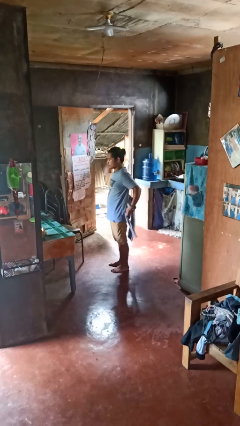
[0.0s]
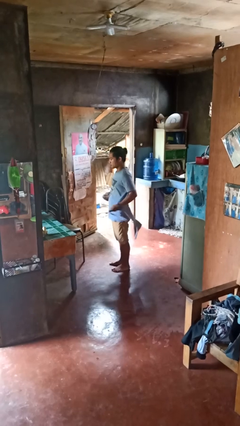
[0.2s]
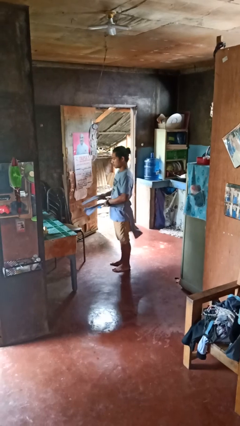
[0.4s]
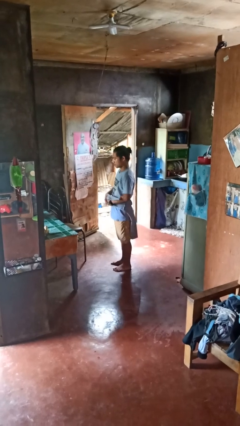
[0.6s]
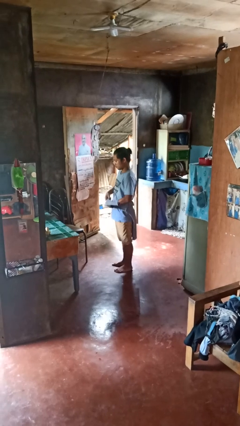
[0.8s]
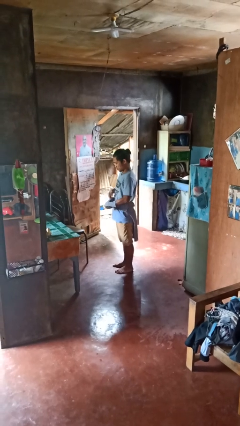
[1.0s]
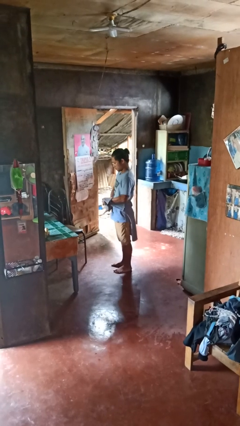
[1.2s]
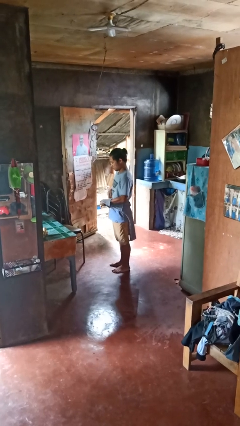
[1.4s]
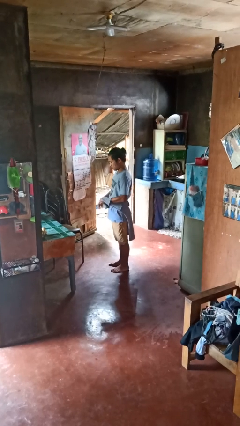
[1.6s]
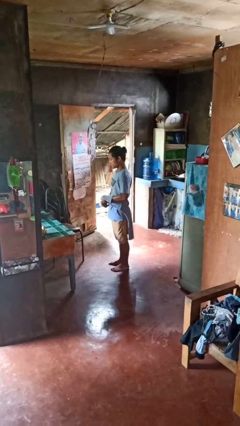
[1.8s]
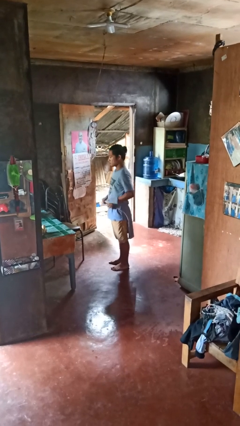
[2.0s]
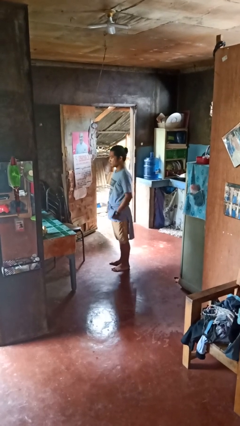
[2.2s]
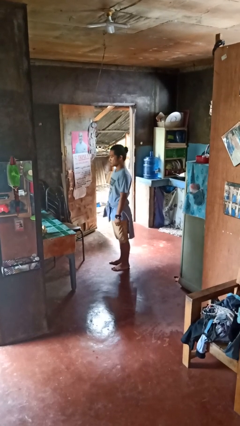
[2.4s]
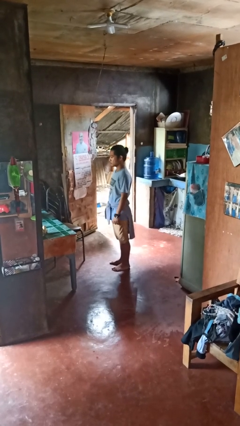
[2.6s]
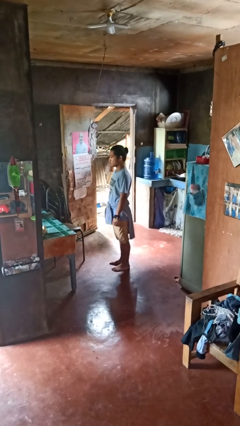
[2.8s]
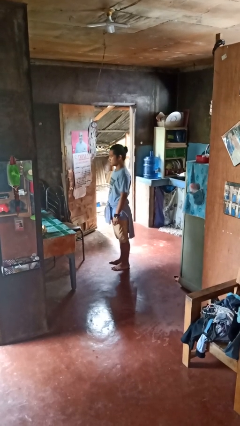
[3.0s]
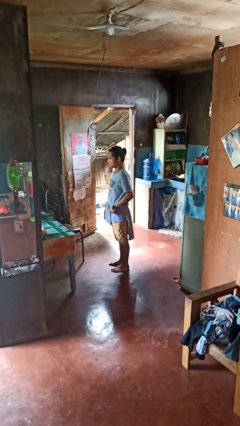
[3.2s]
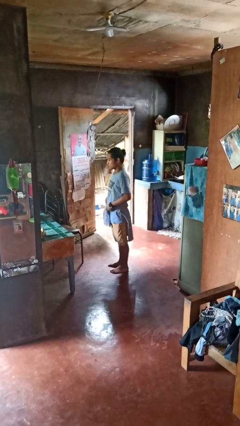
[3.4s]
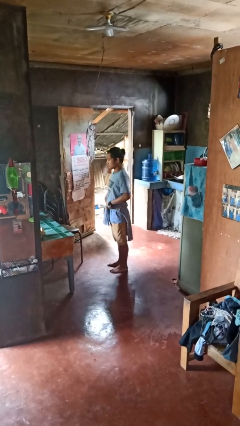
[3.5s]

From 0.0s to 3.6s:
person ties jacket around waist

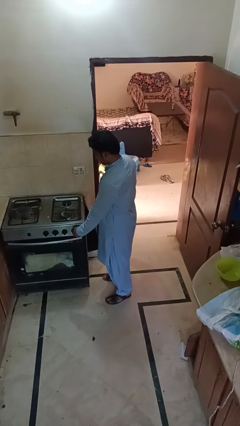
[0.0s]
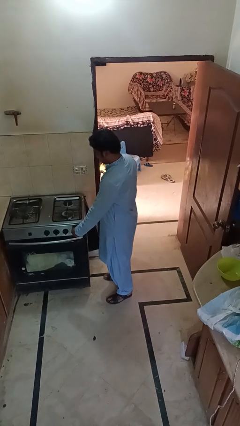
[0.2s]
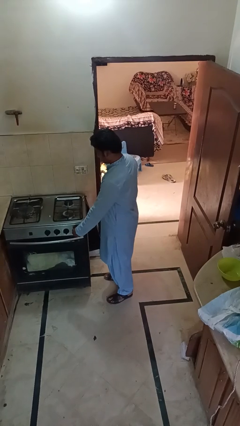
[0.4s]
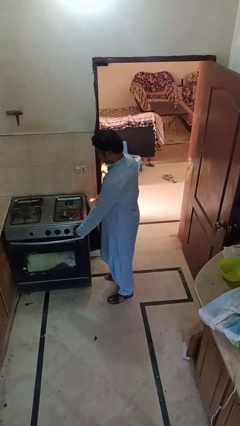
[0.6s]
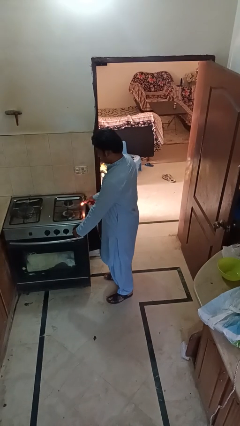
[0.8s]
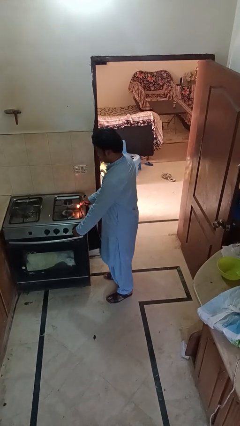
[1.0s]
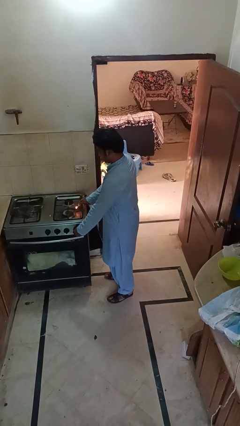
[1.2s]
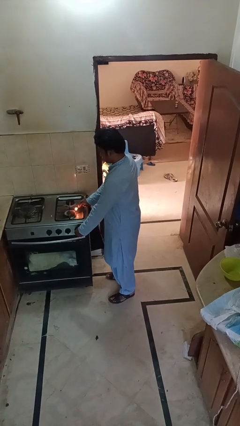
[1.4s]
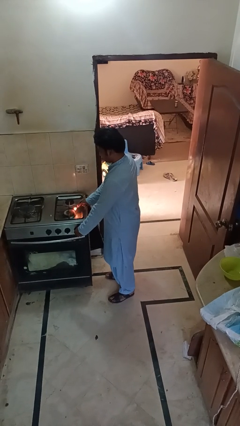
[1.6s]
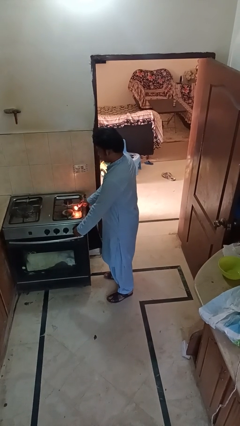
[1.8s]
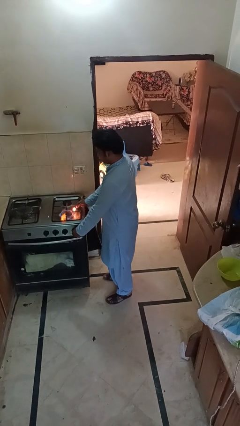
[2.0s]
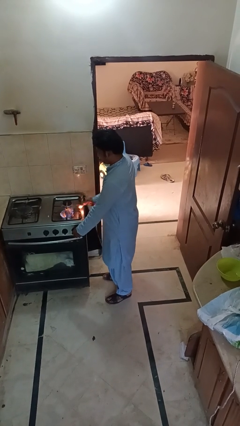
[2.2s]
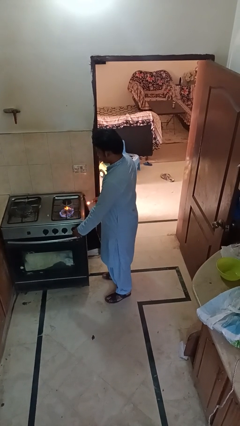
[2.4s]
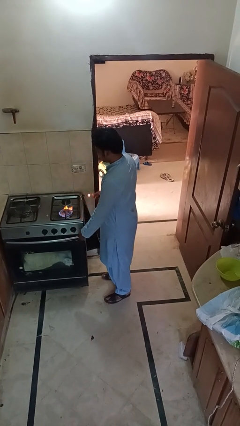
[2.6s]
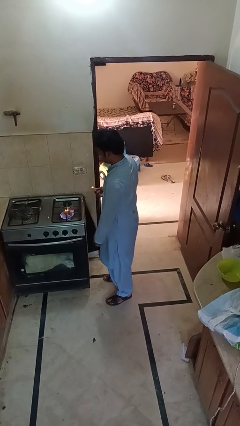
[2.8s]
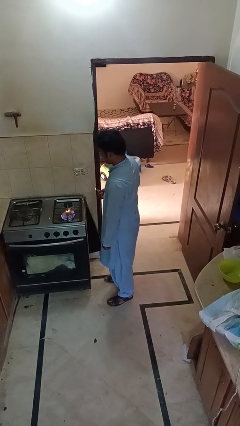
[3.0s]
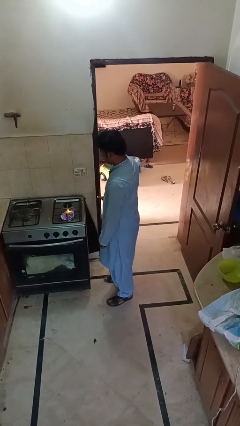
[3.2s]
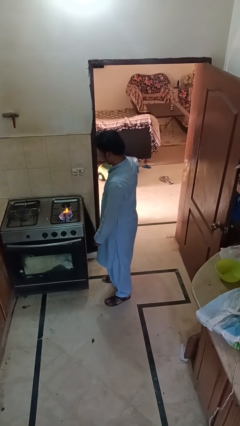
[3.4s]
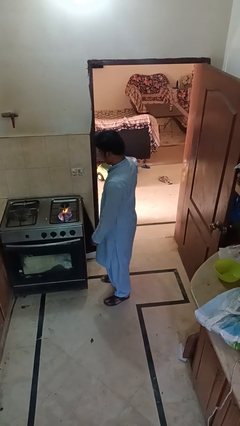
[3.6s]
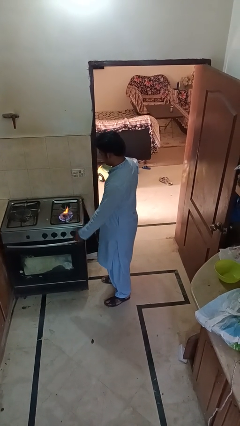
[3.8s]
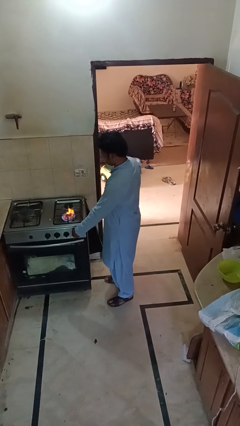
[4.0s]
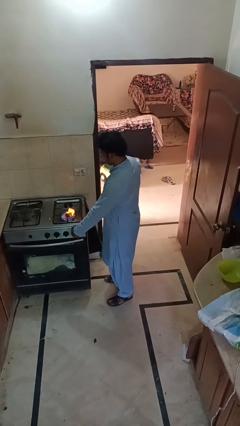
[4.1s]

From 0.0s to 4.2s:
person turns on stovetop

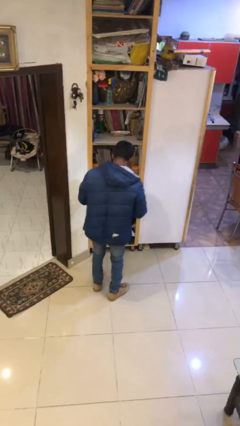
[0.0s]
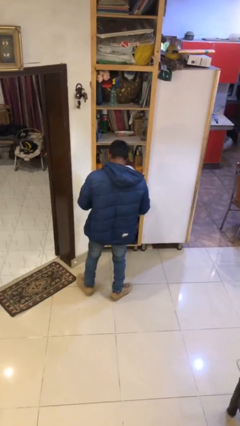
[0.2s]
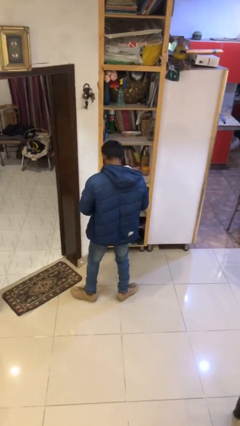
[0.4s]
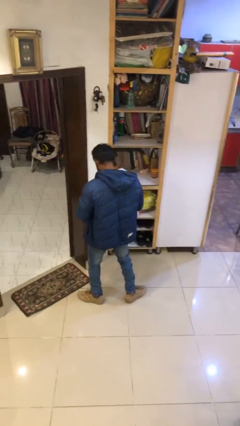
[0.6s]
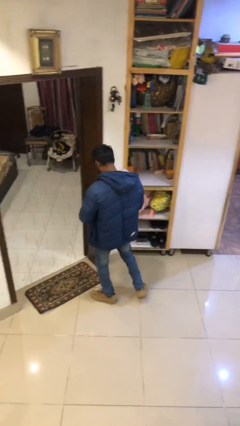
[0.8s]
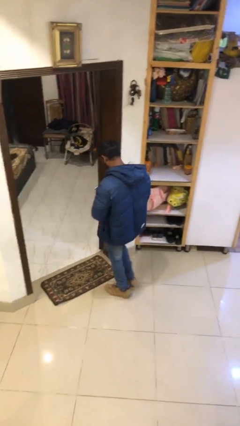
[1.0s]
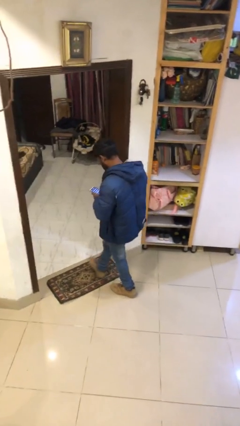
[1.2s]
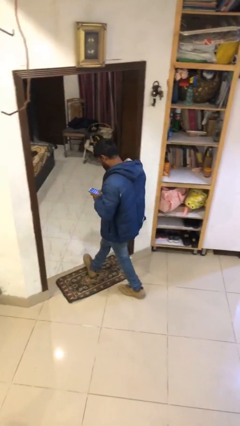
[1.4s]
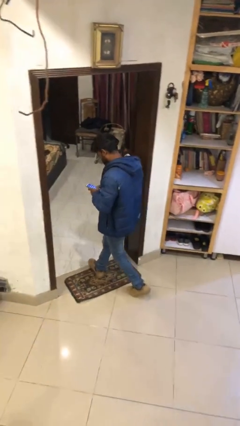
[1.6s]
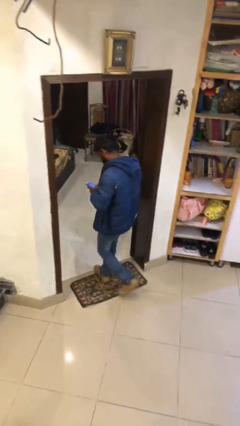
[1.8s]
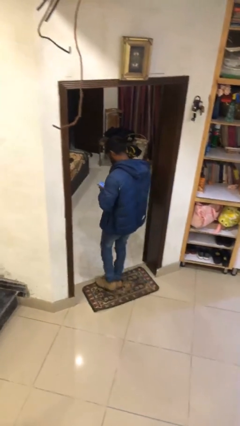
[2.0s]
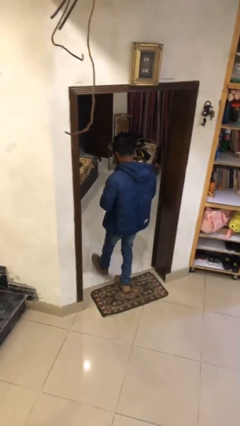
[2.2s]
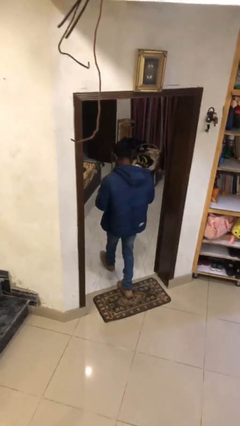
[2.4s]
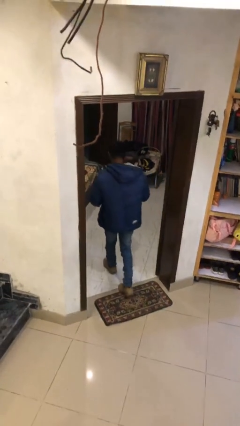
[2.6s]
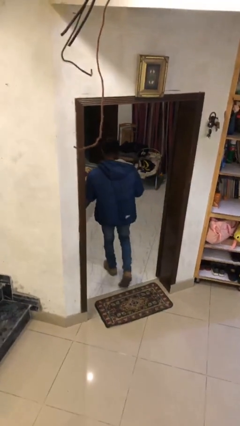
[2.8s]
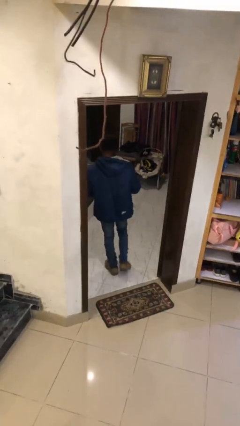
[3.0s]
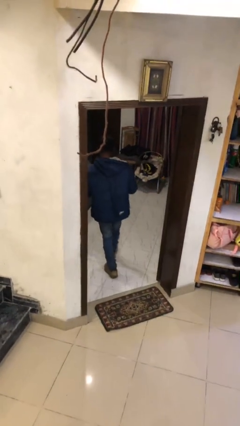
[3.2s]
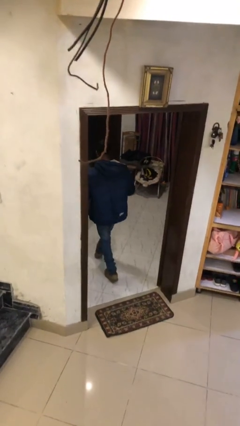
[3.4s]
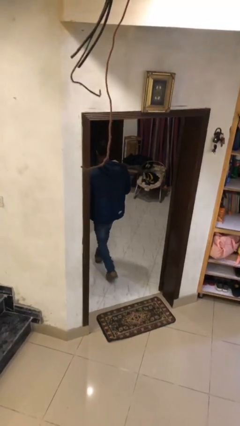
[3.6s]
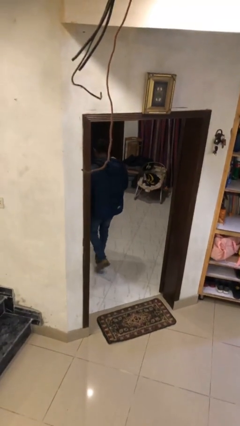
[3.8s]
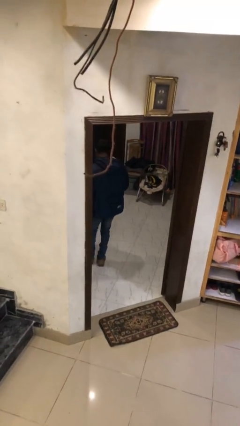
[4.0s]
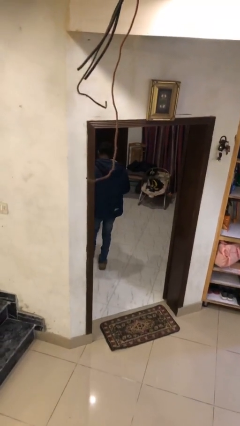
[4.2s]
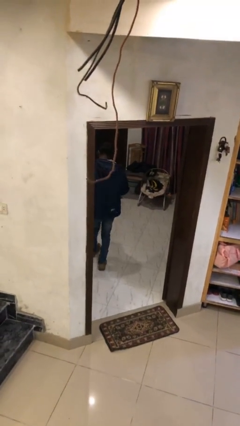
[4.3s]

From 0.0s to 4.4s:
person exits scene through structure

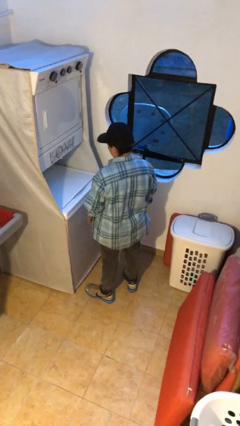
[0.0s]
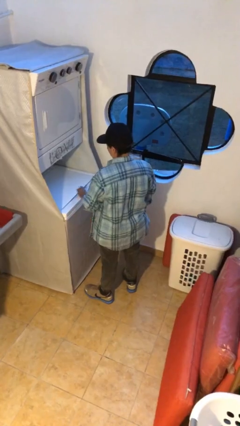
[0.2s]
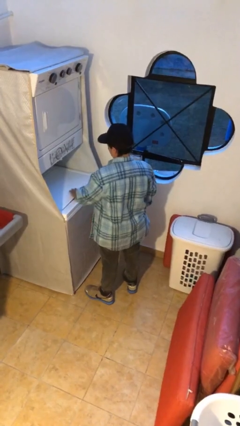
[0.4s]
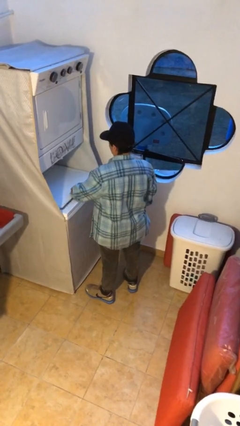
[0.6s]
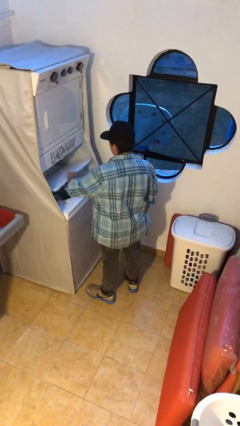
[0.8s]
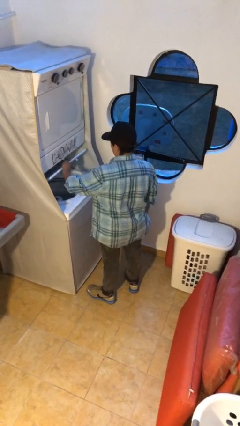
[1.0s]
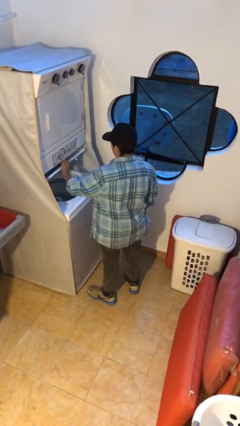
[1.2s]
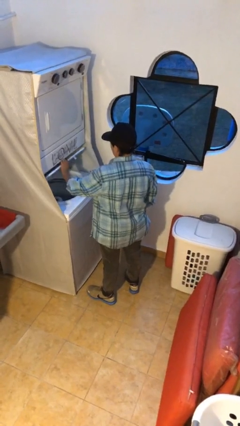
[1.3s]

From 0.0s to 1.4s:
person opens clothes washer

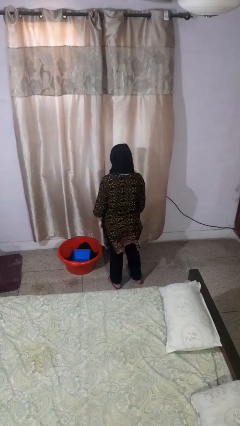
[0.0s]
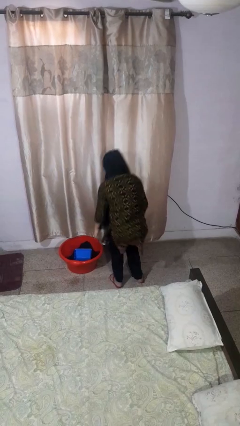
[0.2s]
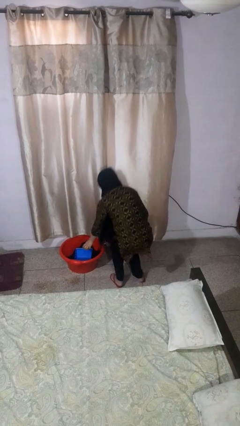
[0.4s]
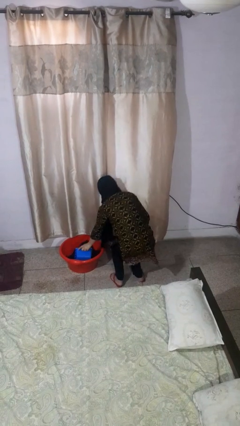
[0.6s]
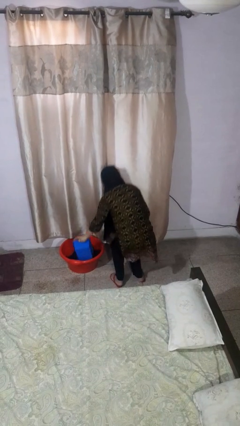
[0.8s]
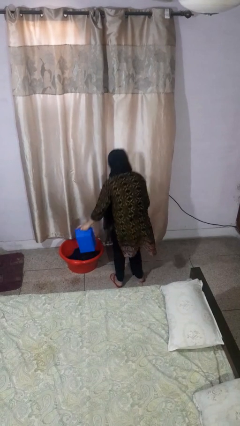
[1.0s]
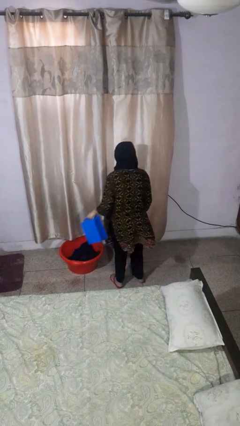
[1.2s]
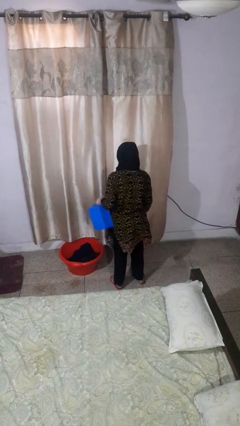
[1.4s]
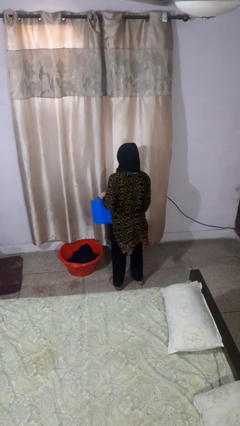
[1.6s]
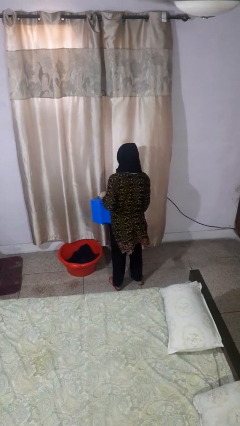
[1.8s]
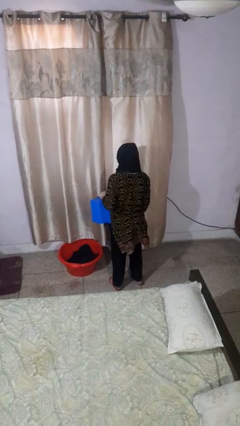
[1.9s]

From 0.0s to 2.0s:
person takes object from basket

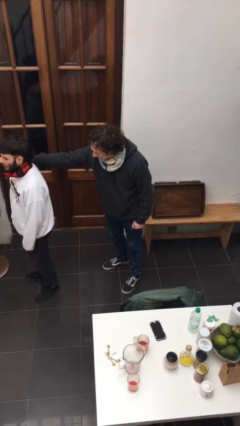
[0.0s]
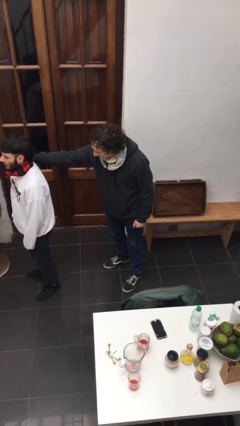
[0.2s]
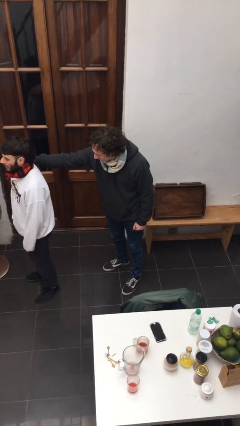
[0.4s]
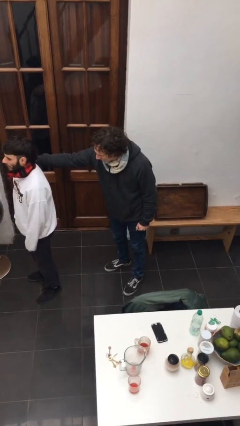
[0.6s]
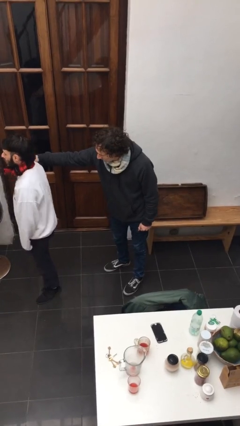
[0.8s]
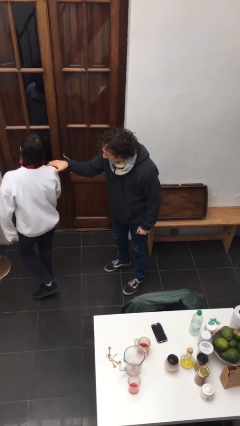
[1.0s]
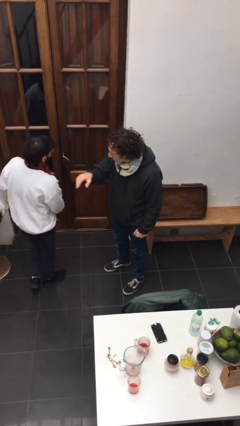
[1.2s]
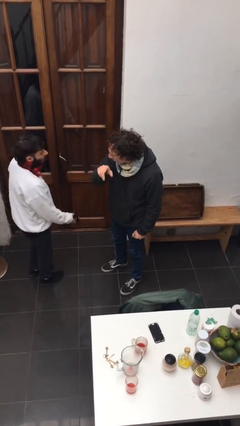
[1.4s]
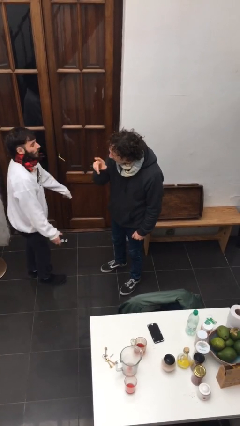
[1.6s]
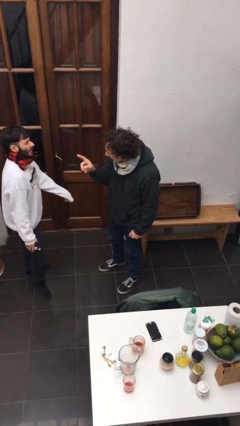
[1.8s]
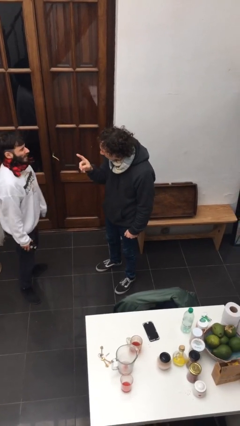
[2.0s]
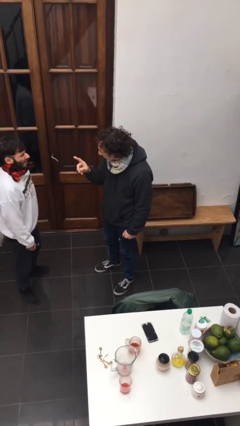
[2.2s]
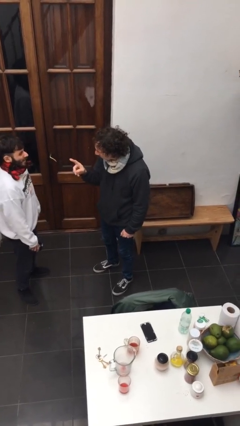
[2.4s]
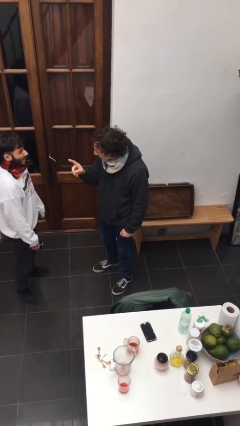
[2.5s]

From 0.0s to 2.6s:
person spins person around
